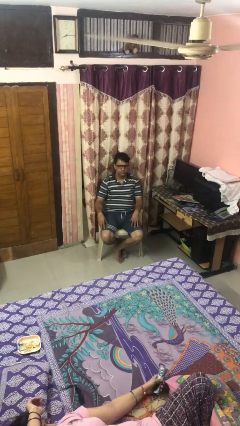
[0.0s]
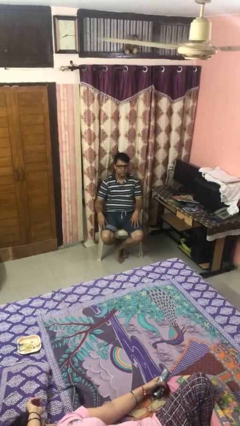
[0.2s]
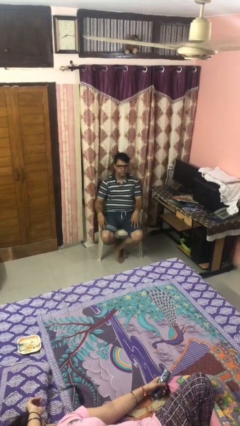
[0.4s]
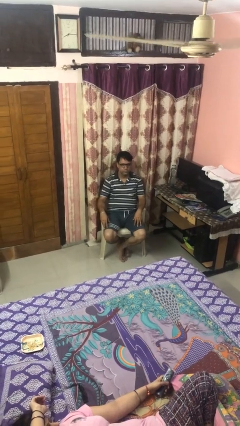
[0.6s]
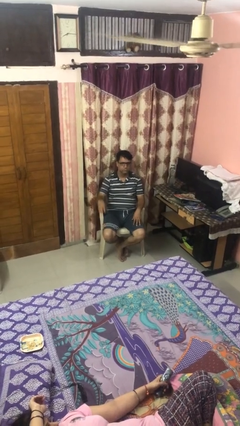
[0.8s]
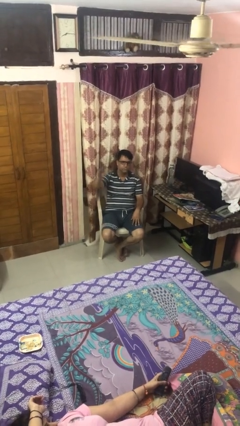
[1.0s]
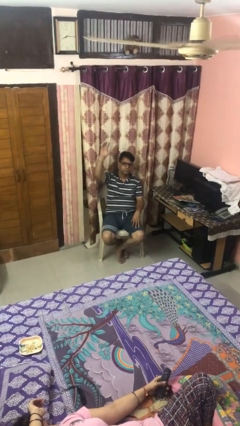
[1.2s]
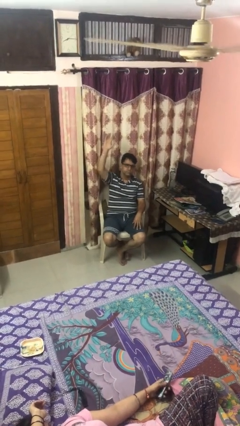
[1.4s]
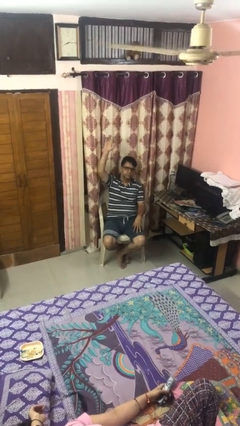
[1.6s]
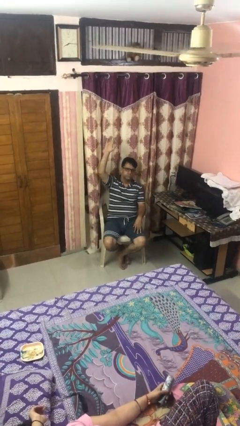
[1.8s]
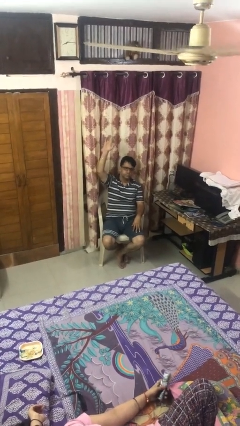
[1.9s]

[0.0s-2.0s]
person gestures raise hand

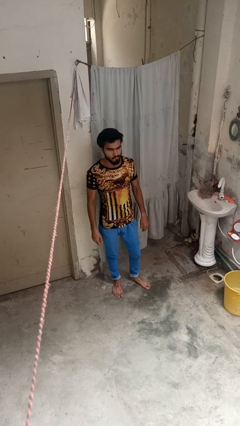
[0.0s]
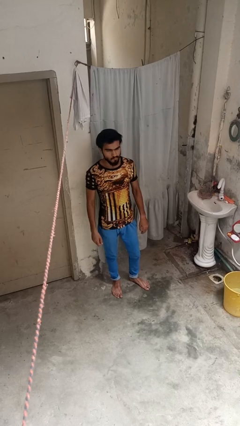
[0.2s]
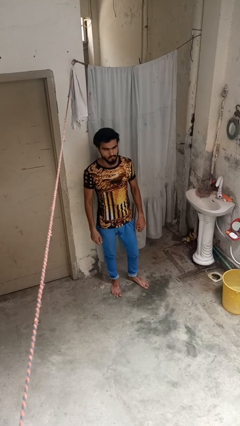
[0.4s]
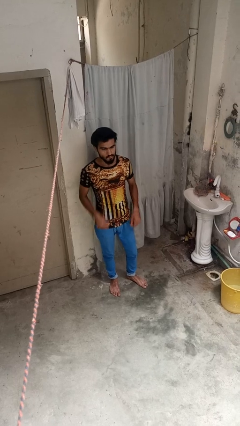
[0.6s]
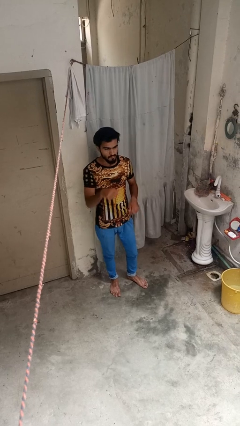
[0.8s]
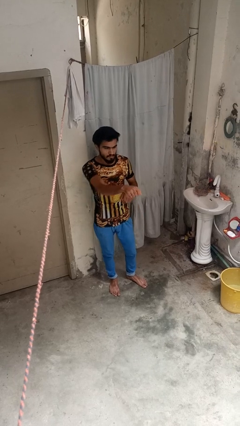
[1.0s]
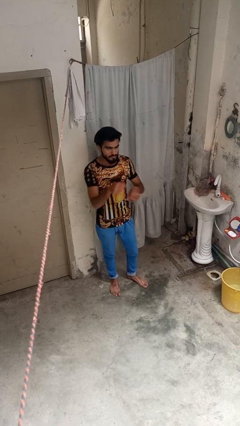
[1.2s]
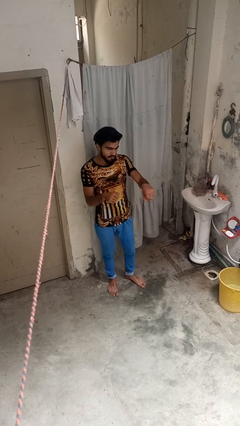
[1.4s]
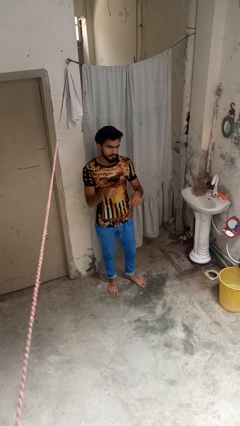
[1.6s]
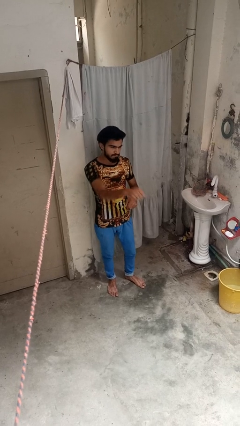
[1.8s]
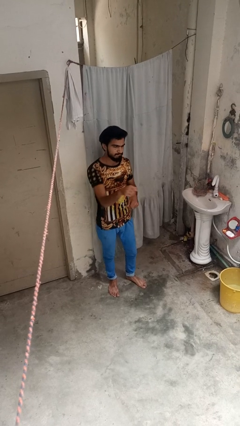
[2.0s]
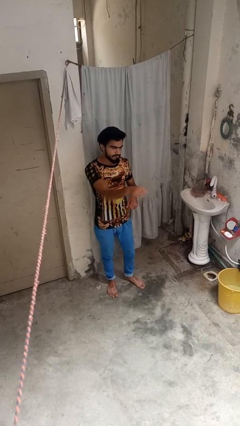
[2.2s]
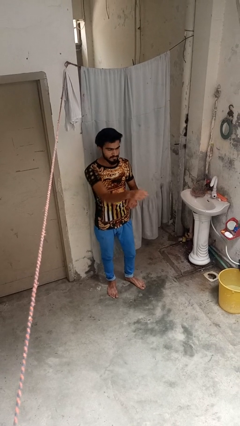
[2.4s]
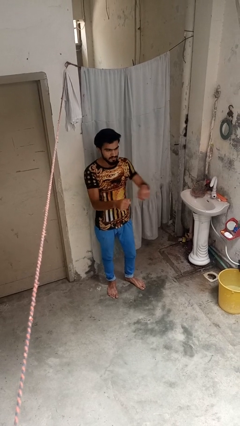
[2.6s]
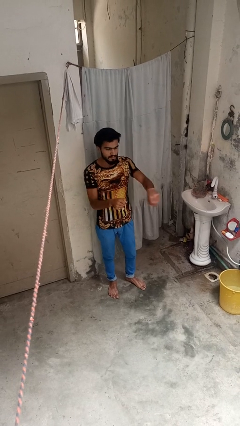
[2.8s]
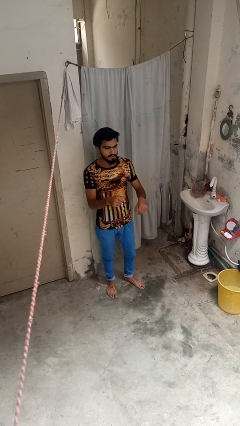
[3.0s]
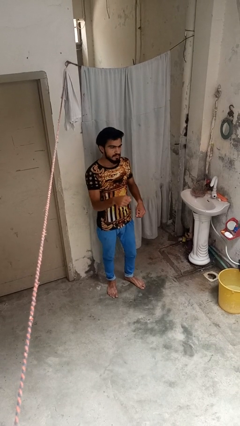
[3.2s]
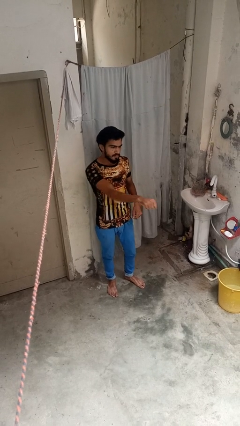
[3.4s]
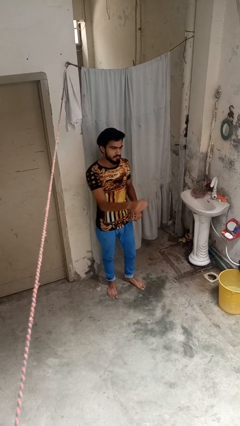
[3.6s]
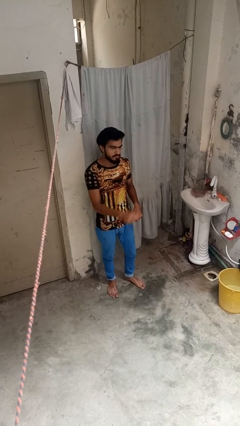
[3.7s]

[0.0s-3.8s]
person punches

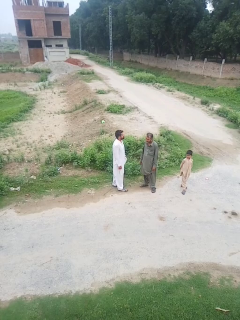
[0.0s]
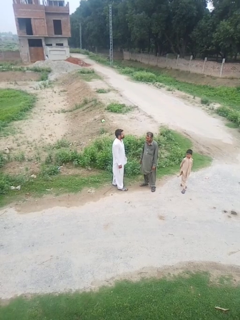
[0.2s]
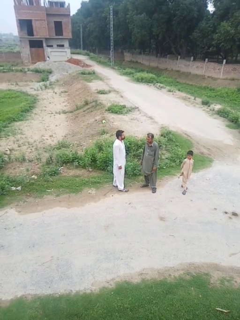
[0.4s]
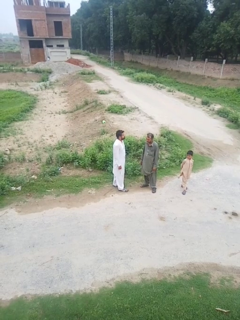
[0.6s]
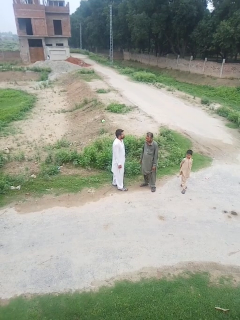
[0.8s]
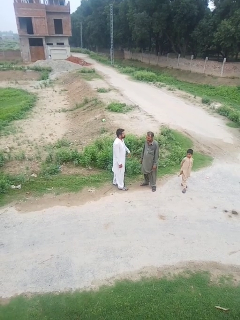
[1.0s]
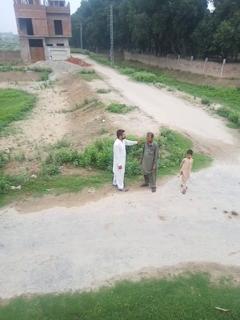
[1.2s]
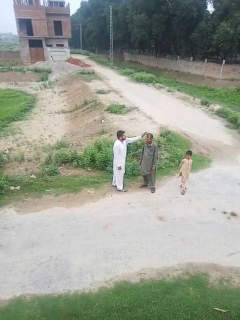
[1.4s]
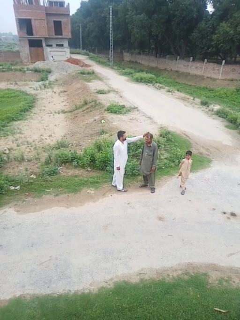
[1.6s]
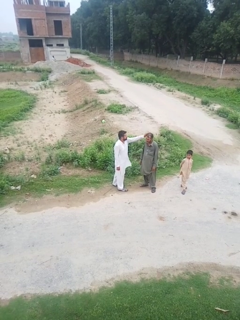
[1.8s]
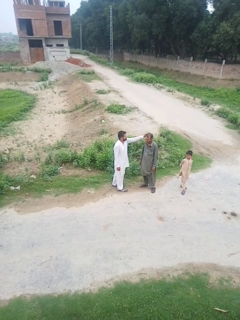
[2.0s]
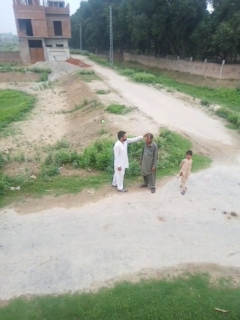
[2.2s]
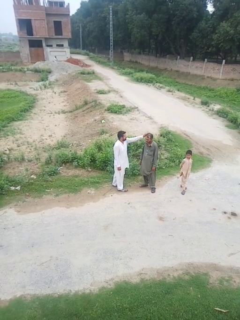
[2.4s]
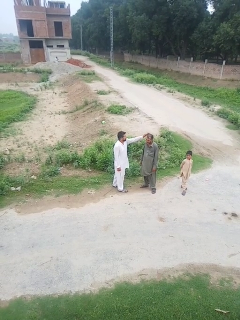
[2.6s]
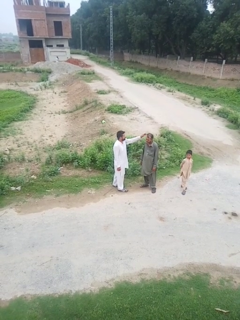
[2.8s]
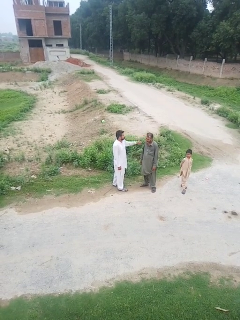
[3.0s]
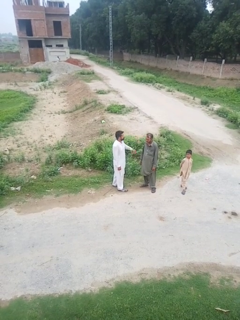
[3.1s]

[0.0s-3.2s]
person touches face of person

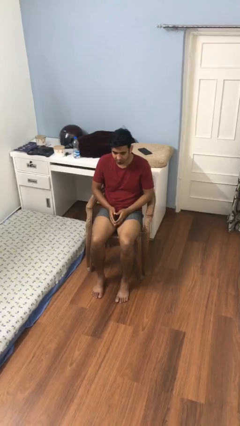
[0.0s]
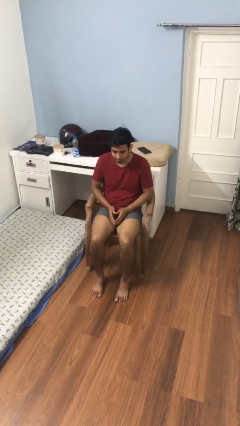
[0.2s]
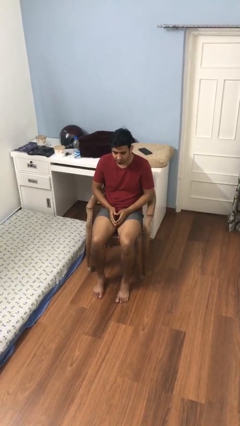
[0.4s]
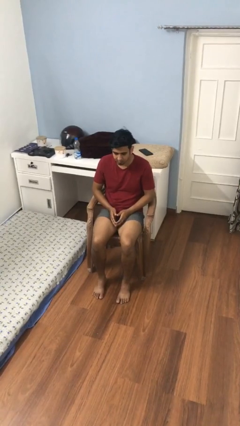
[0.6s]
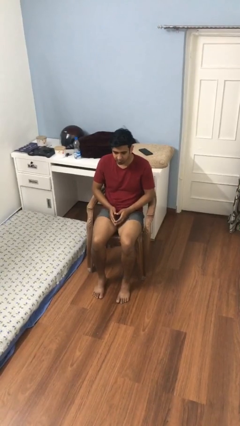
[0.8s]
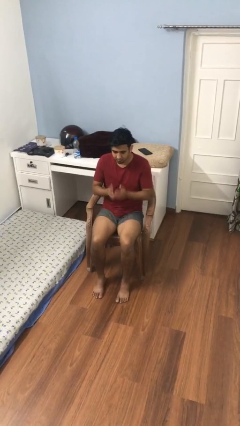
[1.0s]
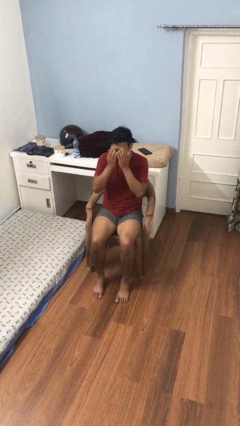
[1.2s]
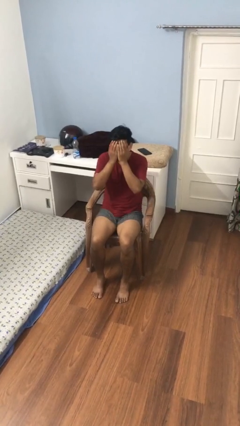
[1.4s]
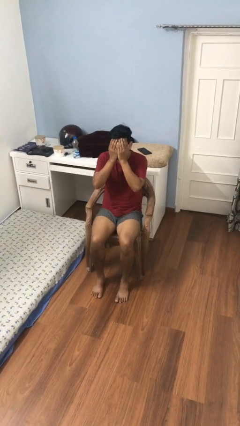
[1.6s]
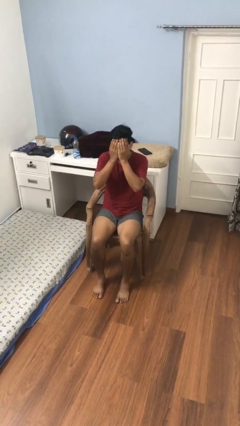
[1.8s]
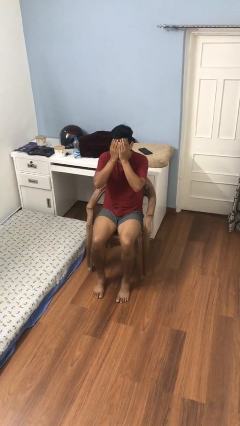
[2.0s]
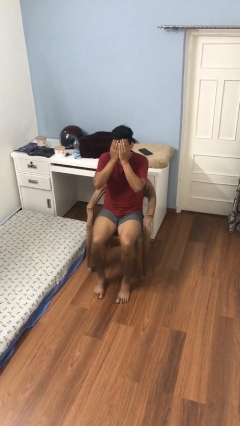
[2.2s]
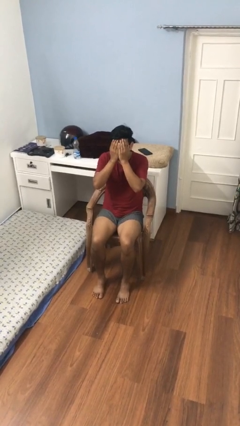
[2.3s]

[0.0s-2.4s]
person covers face with hands

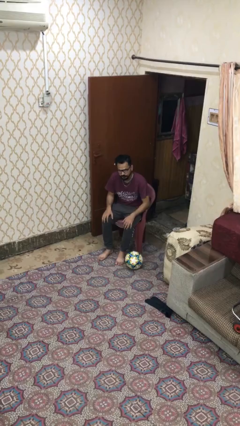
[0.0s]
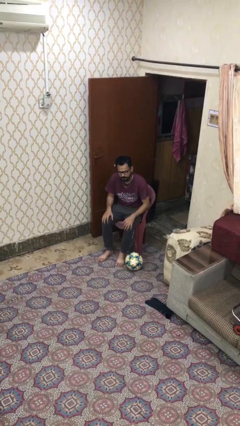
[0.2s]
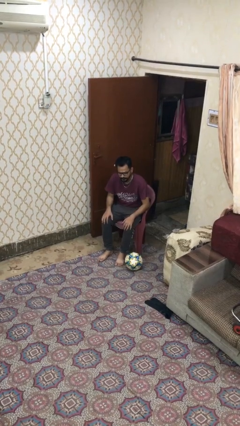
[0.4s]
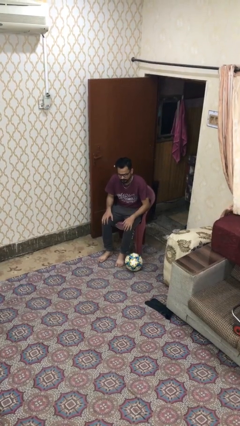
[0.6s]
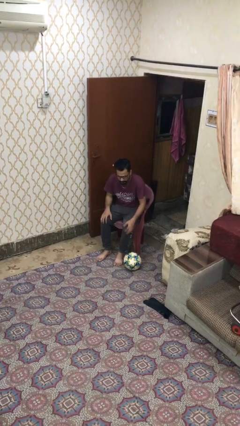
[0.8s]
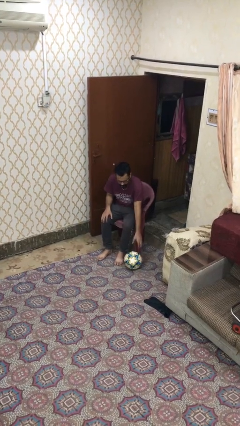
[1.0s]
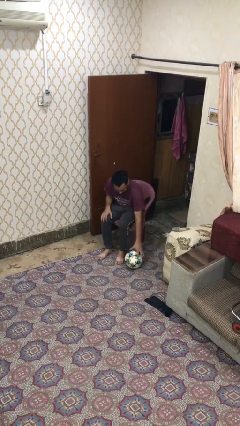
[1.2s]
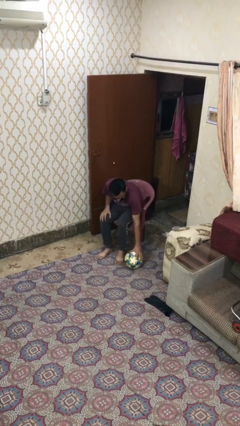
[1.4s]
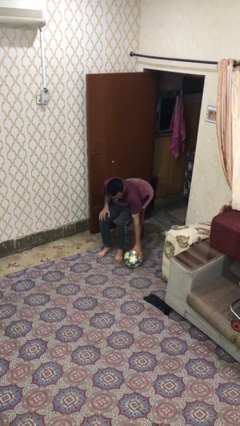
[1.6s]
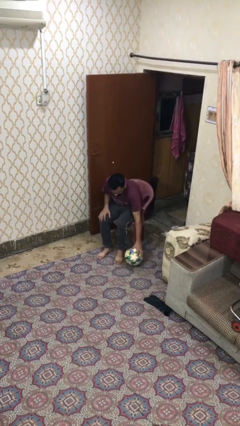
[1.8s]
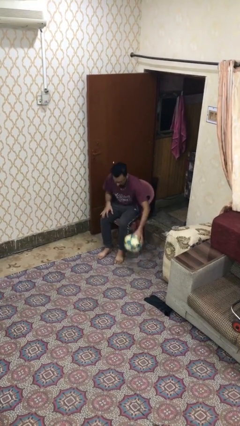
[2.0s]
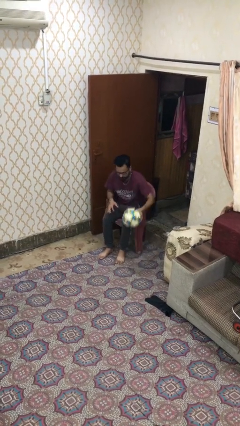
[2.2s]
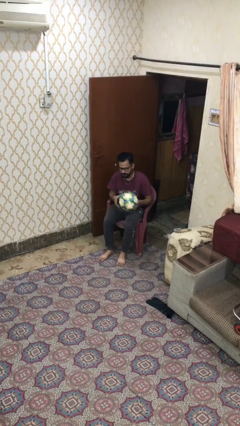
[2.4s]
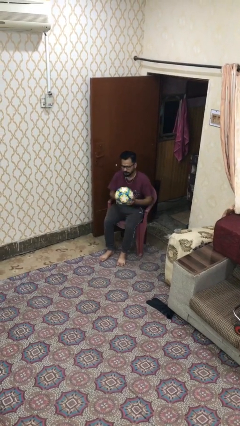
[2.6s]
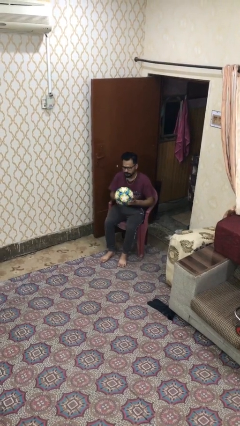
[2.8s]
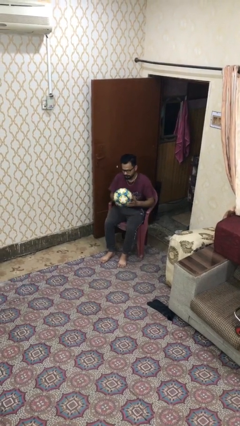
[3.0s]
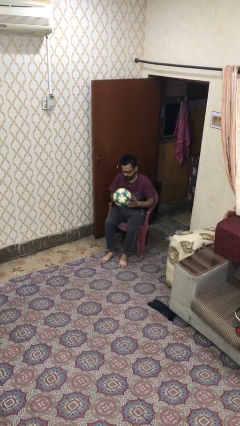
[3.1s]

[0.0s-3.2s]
person picks up object from floor

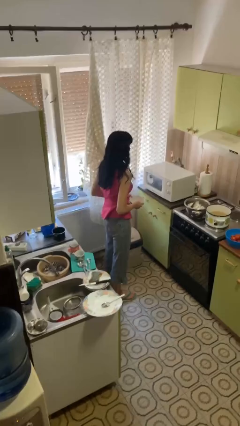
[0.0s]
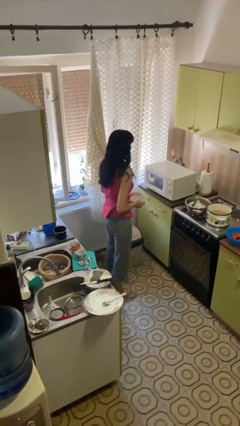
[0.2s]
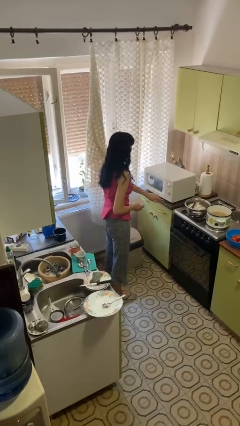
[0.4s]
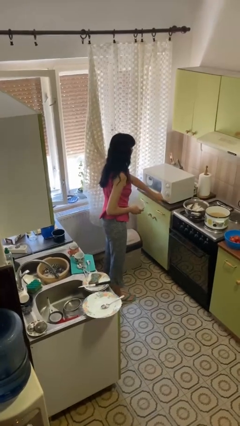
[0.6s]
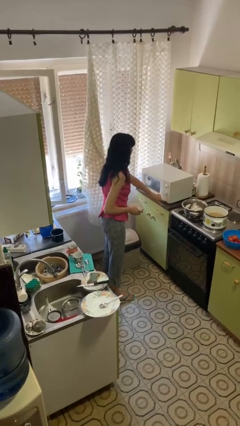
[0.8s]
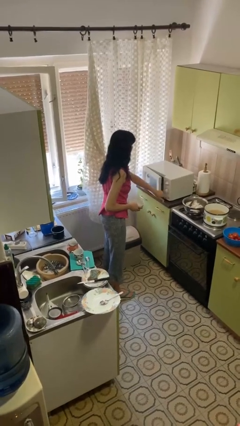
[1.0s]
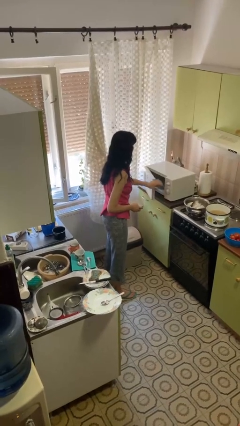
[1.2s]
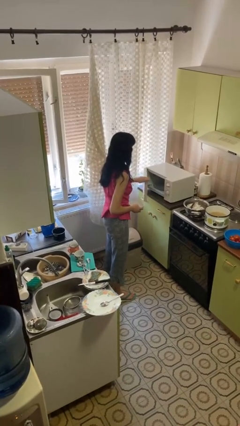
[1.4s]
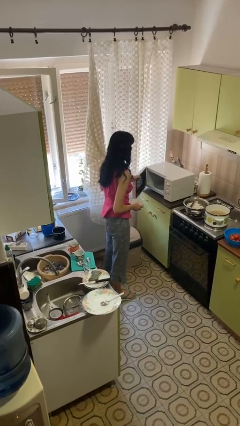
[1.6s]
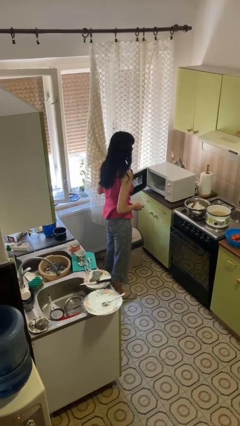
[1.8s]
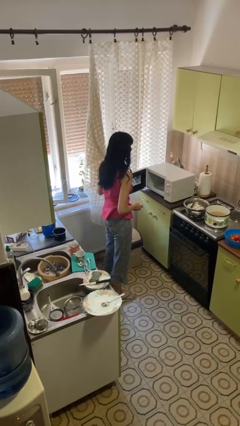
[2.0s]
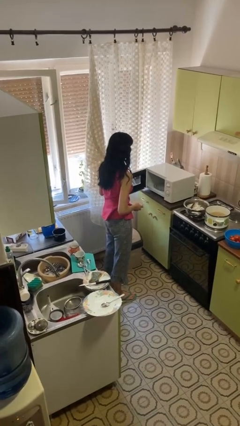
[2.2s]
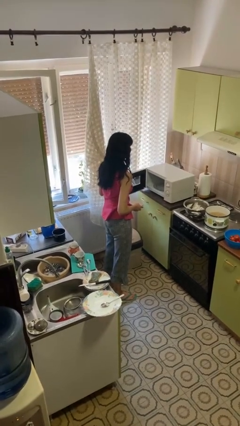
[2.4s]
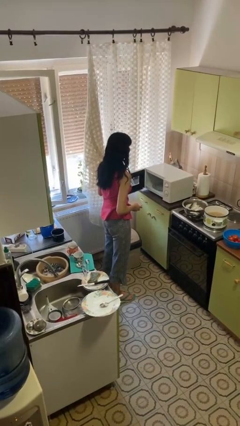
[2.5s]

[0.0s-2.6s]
person opens microwave

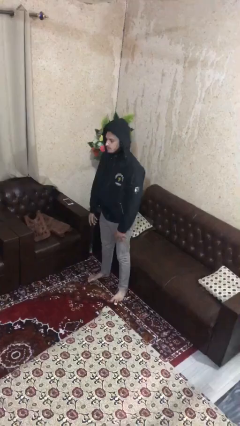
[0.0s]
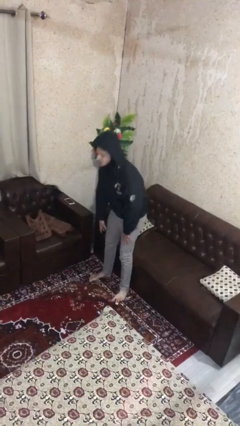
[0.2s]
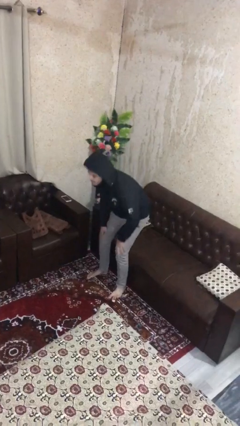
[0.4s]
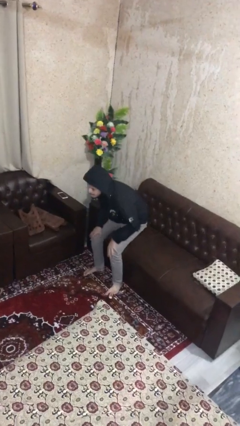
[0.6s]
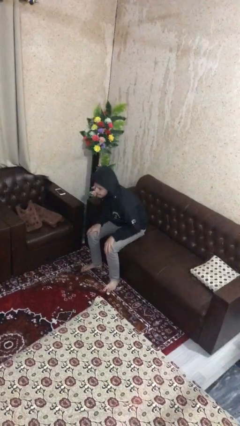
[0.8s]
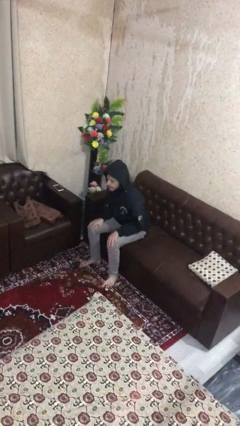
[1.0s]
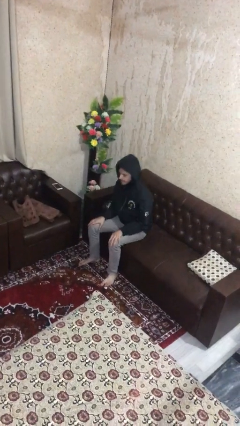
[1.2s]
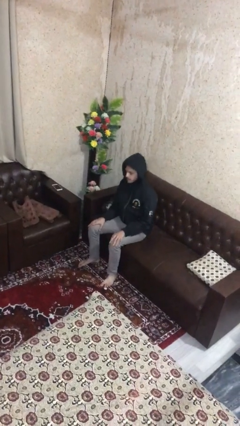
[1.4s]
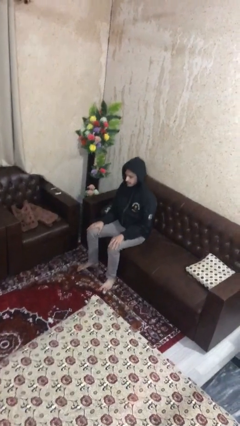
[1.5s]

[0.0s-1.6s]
person sits down
